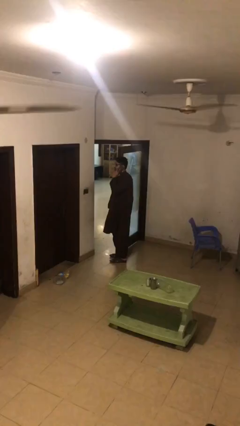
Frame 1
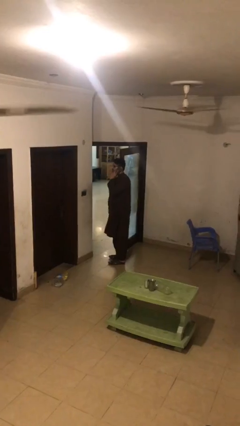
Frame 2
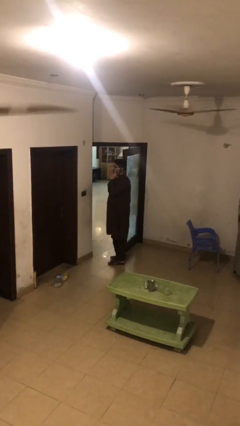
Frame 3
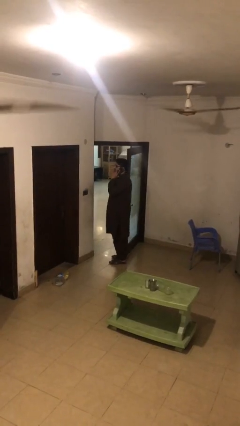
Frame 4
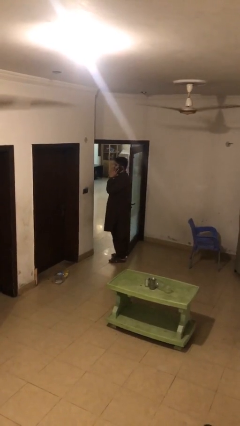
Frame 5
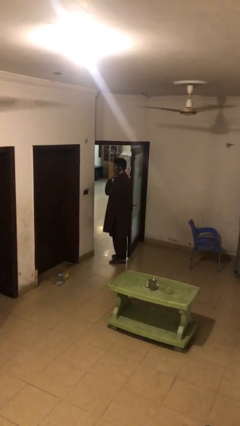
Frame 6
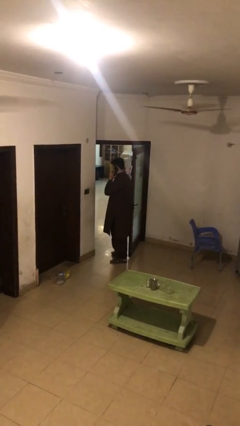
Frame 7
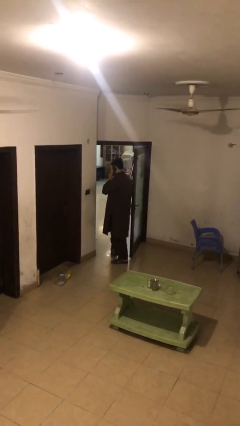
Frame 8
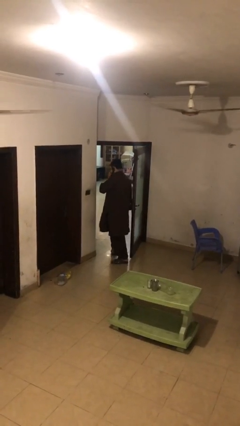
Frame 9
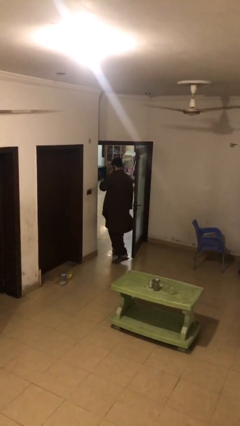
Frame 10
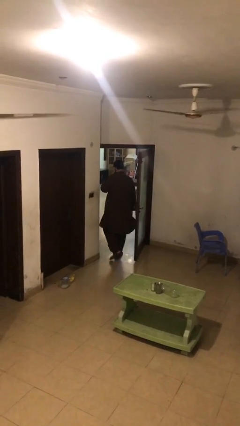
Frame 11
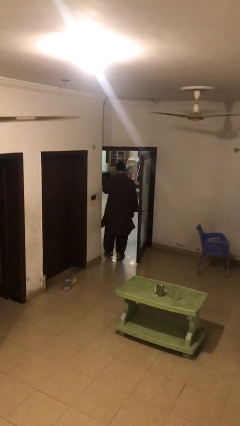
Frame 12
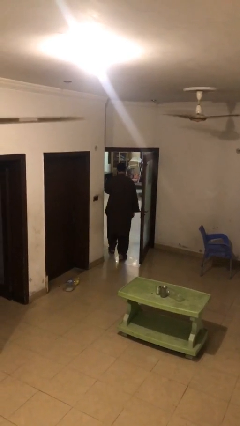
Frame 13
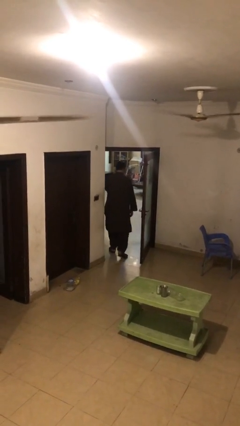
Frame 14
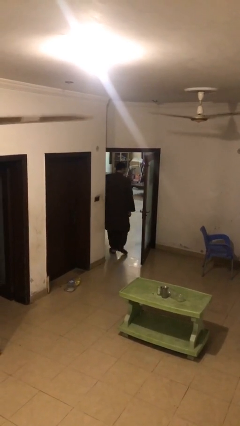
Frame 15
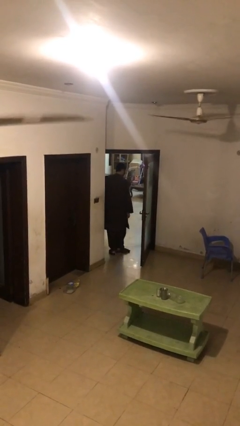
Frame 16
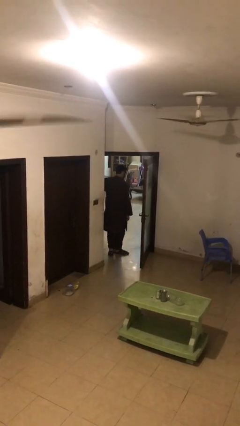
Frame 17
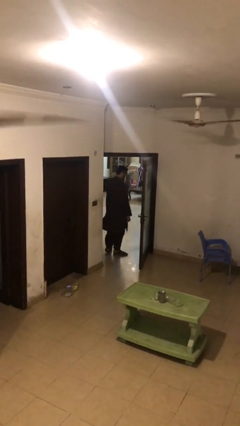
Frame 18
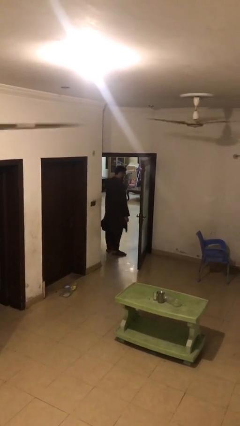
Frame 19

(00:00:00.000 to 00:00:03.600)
person exits scene through structure

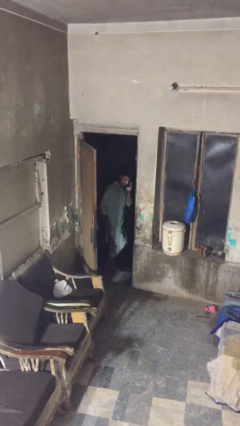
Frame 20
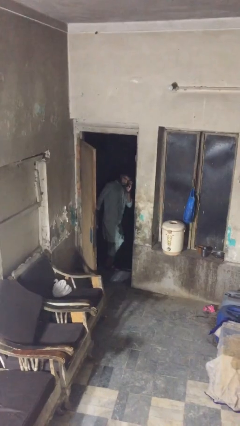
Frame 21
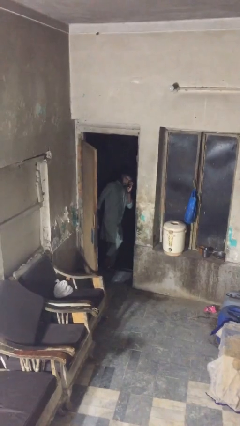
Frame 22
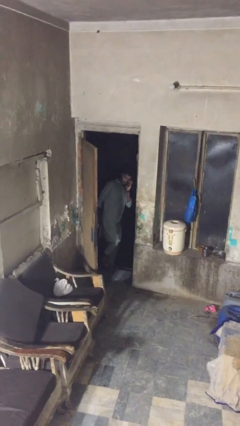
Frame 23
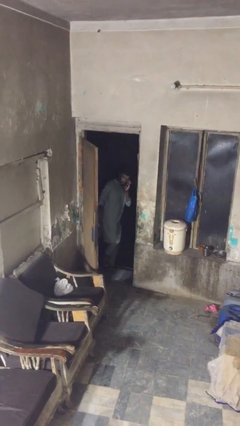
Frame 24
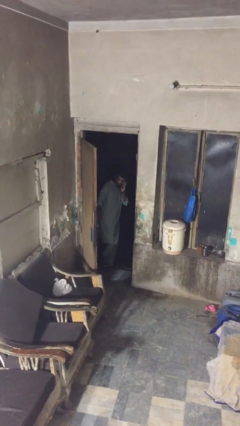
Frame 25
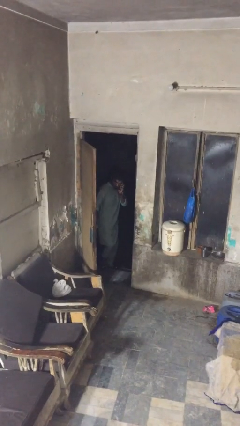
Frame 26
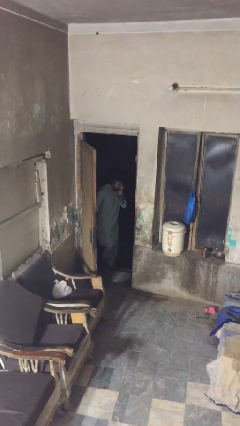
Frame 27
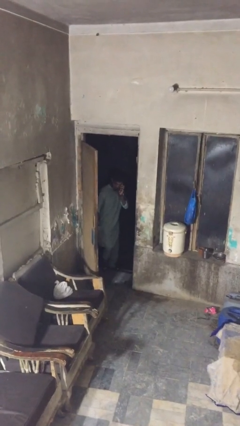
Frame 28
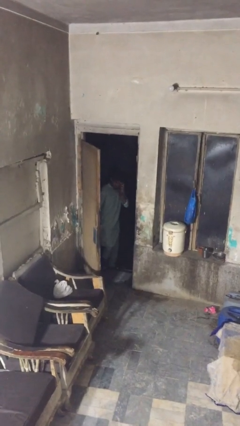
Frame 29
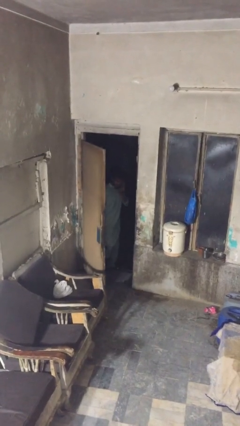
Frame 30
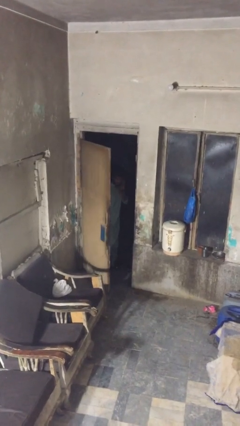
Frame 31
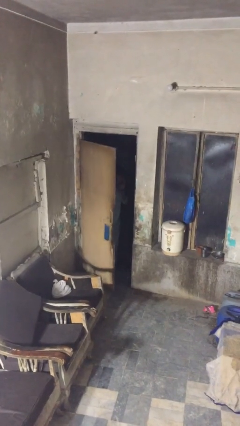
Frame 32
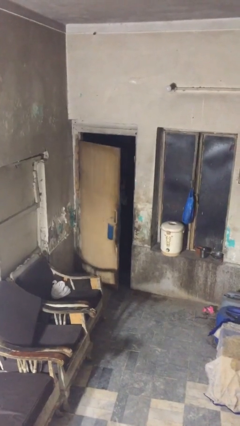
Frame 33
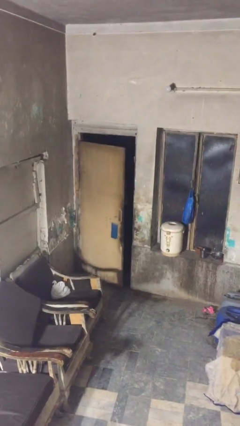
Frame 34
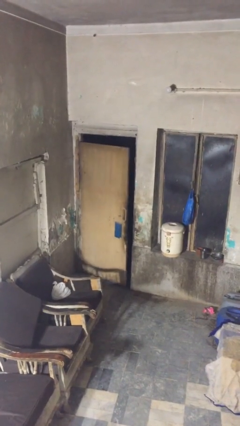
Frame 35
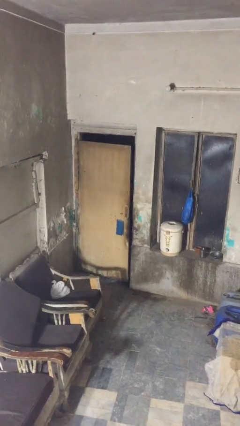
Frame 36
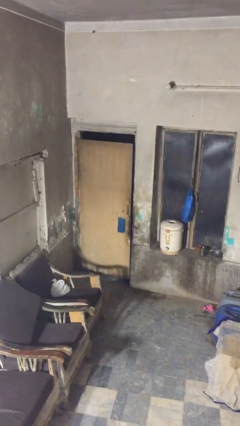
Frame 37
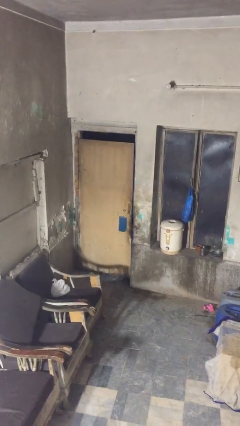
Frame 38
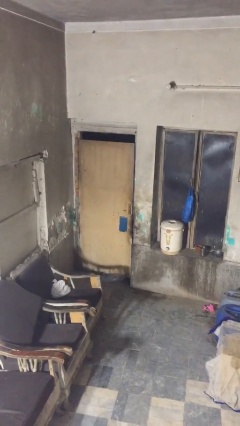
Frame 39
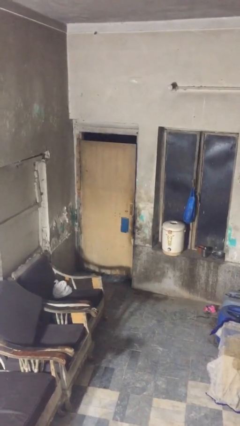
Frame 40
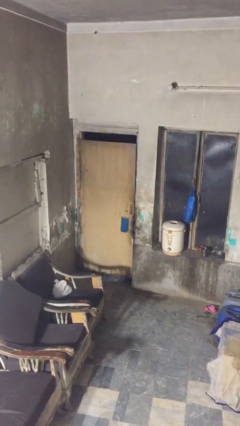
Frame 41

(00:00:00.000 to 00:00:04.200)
person closes facility door

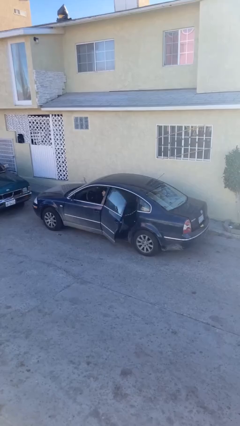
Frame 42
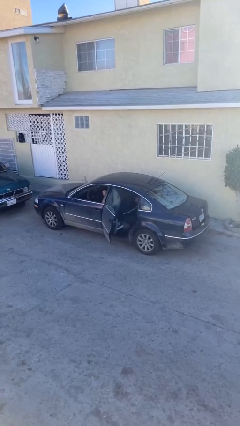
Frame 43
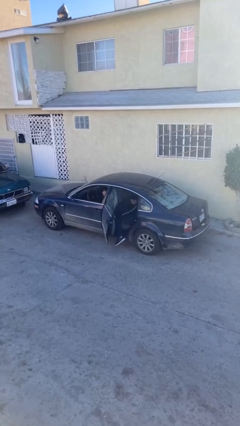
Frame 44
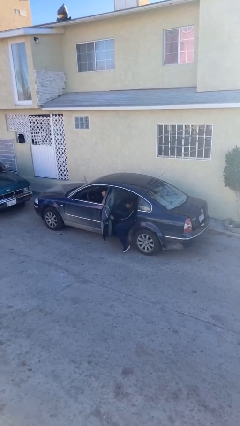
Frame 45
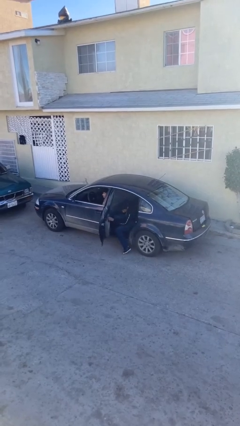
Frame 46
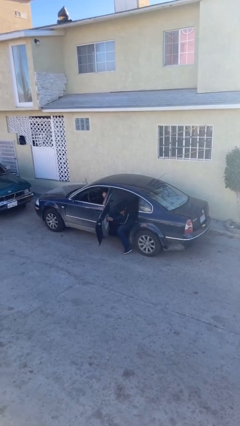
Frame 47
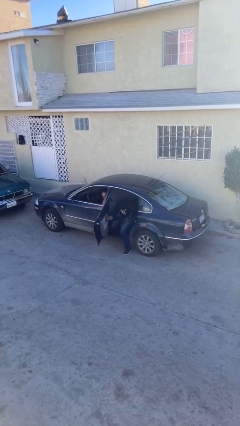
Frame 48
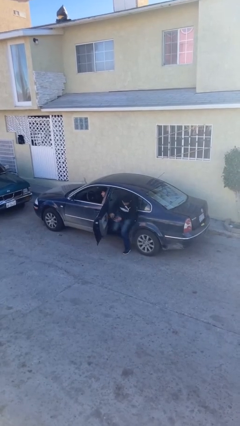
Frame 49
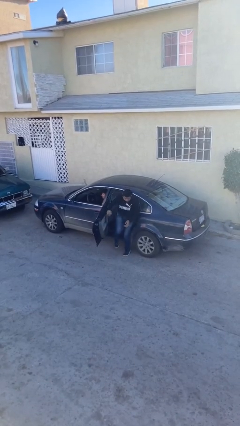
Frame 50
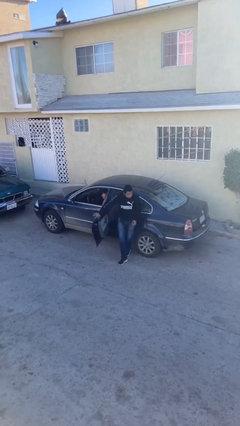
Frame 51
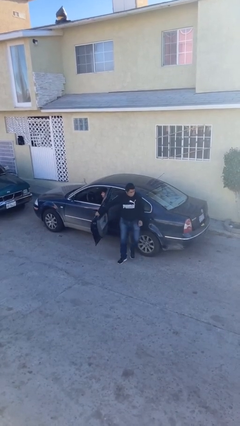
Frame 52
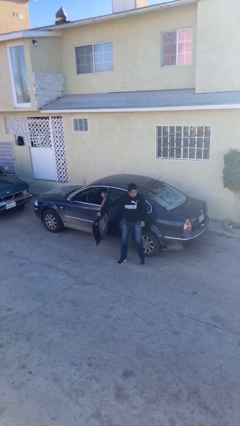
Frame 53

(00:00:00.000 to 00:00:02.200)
car drops off person
